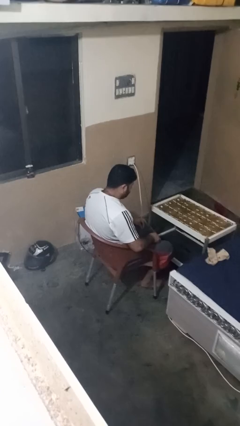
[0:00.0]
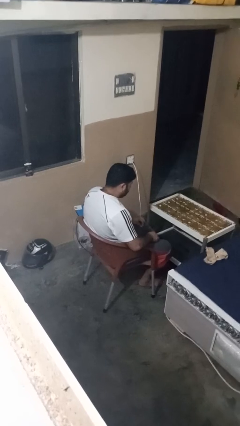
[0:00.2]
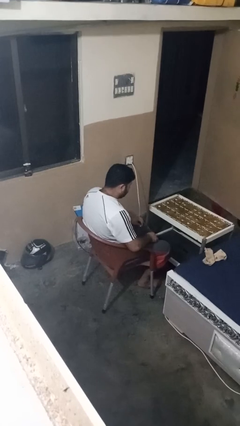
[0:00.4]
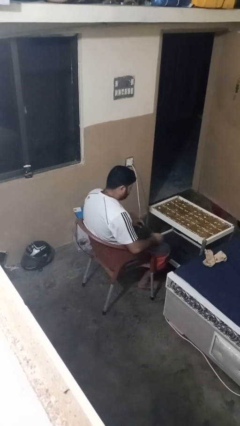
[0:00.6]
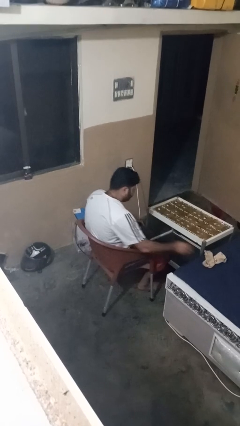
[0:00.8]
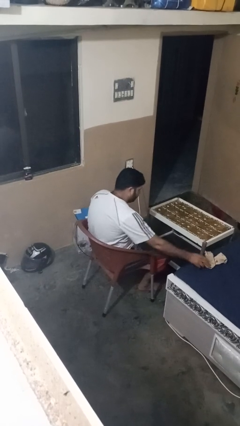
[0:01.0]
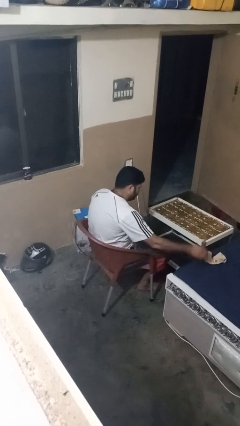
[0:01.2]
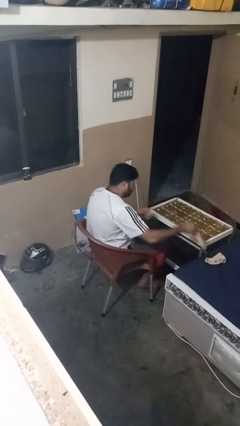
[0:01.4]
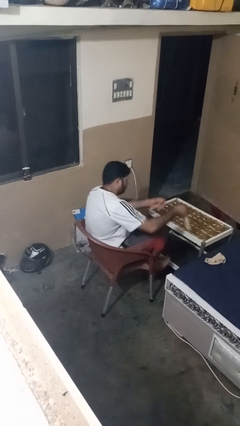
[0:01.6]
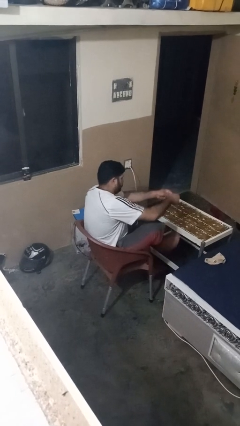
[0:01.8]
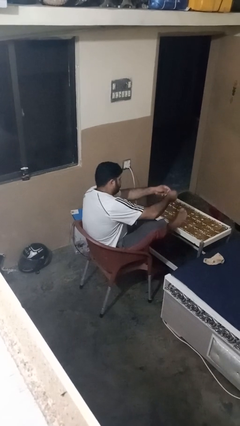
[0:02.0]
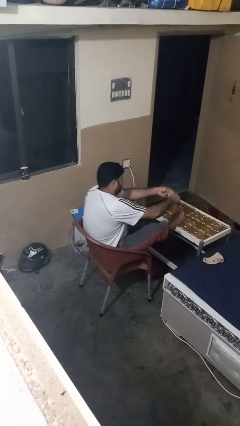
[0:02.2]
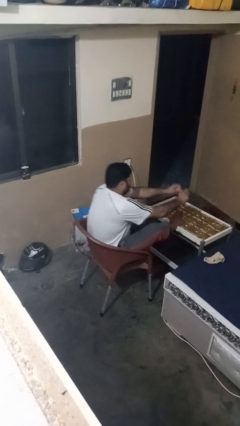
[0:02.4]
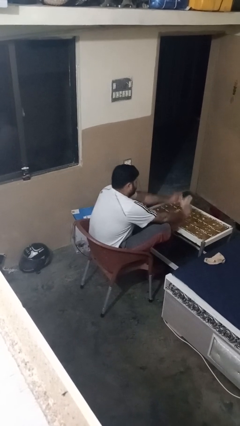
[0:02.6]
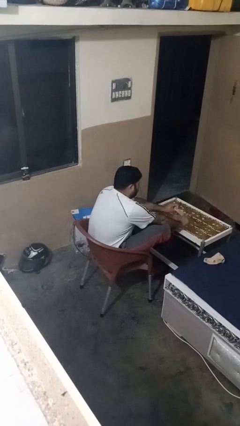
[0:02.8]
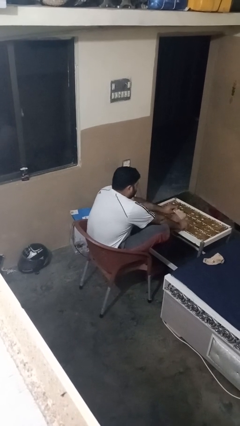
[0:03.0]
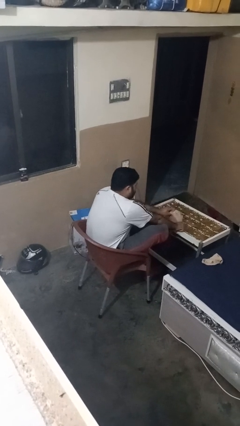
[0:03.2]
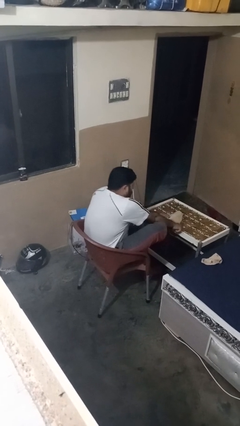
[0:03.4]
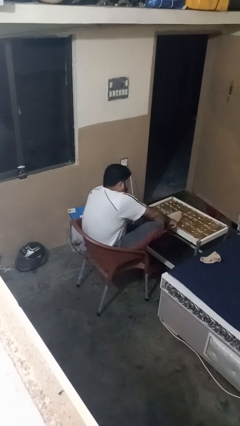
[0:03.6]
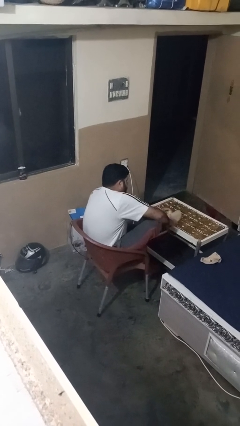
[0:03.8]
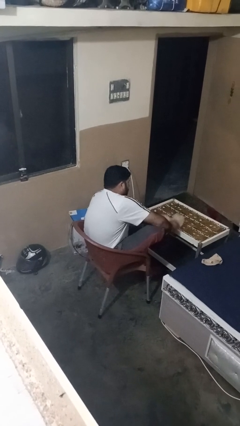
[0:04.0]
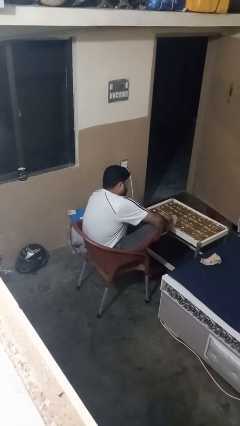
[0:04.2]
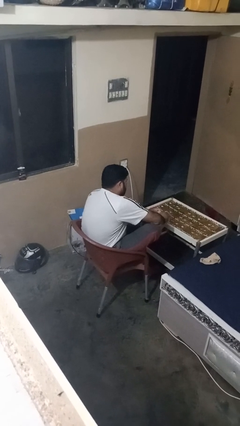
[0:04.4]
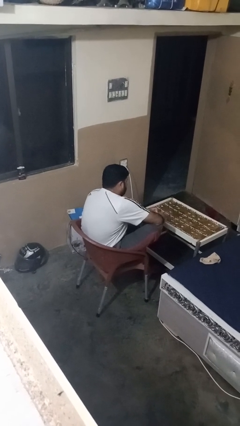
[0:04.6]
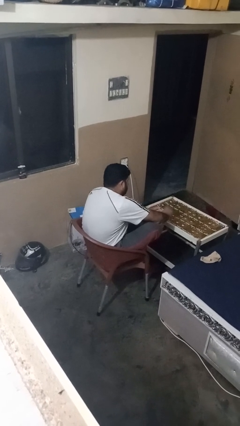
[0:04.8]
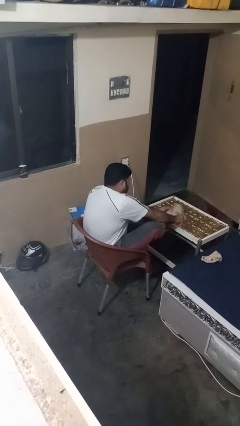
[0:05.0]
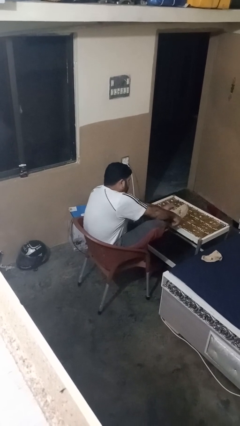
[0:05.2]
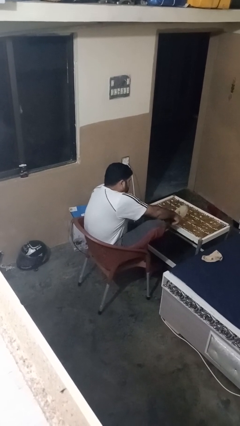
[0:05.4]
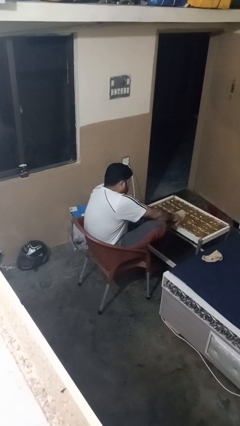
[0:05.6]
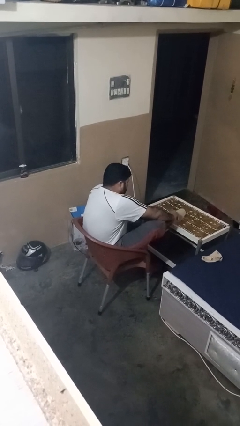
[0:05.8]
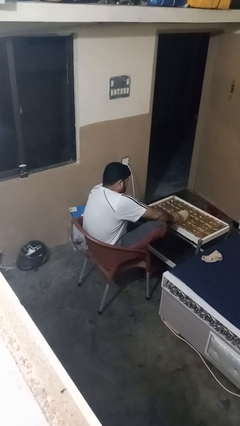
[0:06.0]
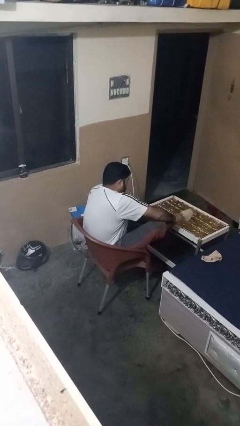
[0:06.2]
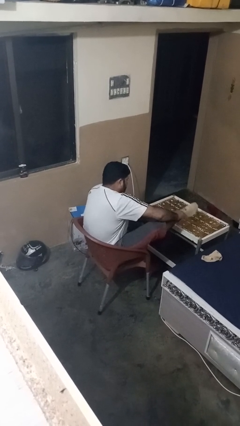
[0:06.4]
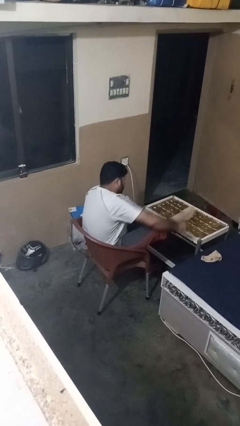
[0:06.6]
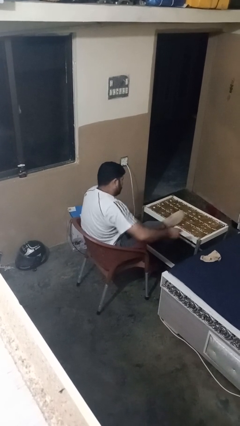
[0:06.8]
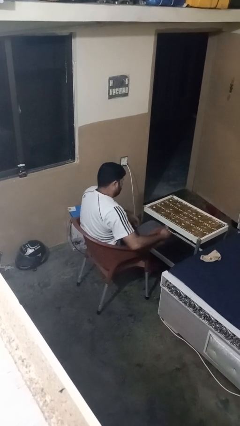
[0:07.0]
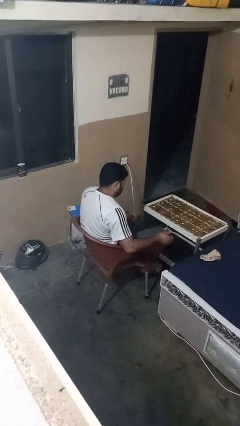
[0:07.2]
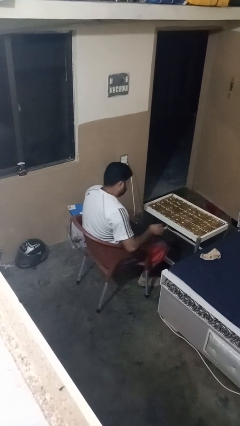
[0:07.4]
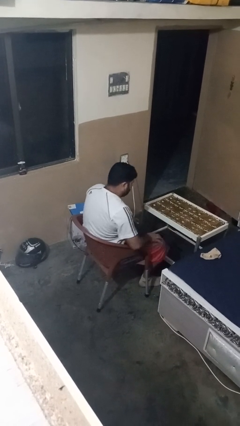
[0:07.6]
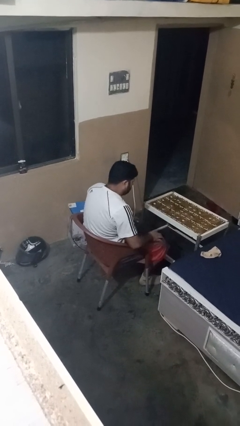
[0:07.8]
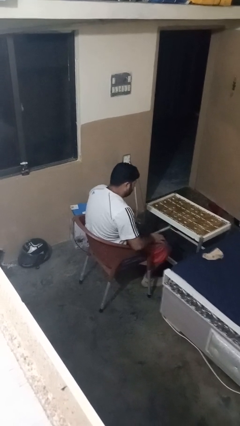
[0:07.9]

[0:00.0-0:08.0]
person puts on socks

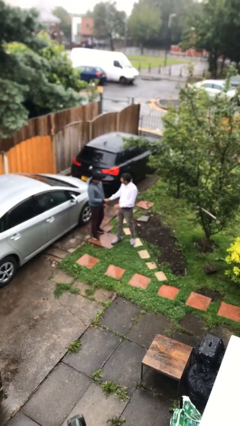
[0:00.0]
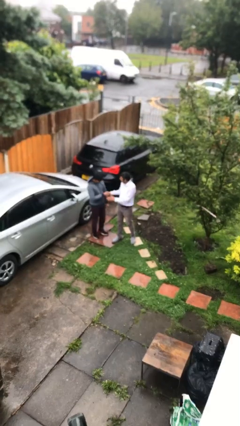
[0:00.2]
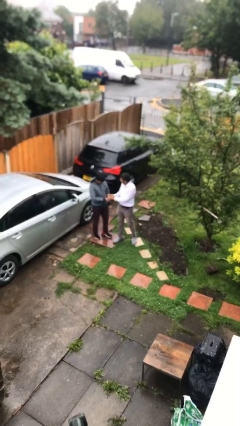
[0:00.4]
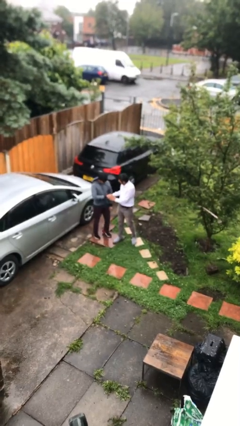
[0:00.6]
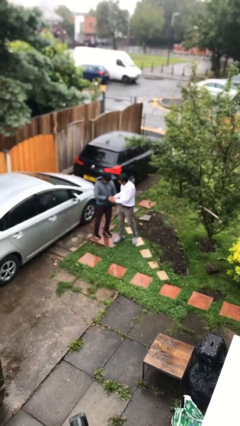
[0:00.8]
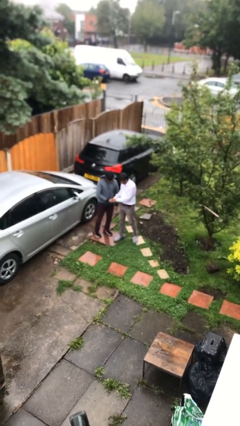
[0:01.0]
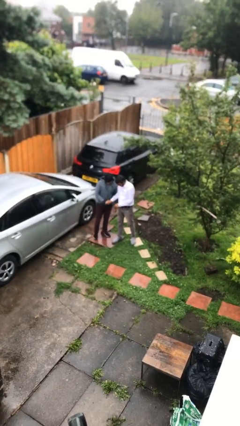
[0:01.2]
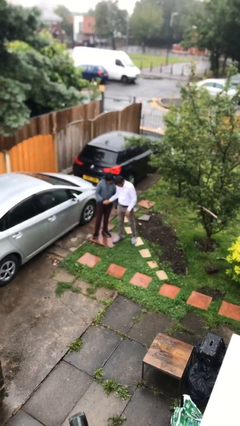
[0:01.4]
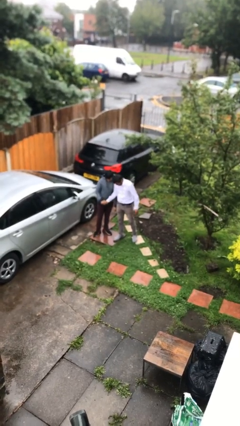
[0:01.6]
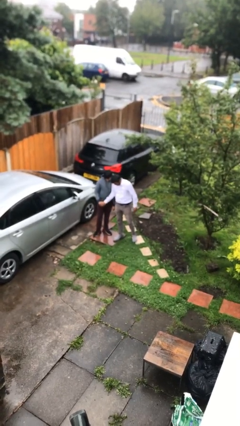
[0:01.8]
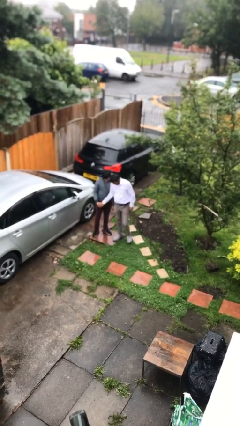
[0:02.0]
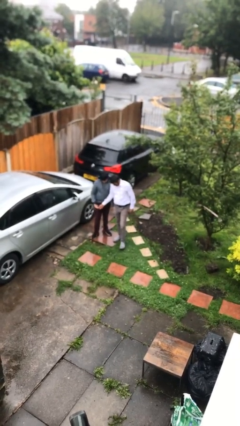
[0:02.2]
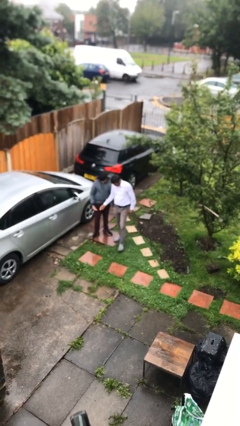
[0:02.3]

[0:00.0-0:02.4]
person shakes hand

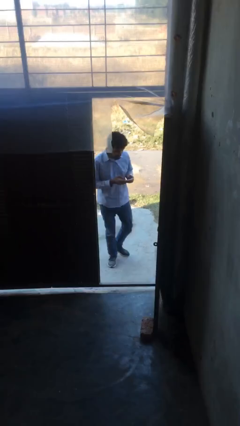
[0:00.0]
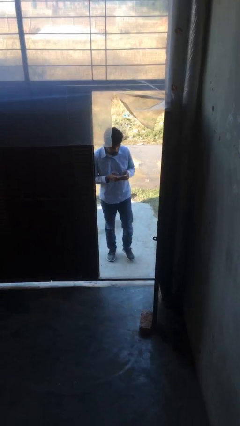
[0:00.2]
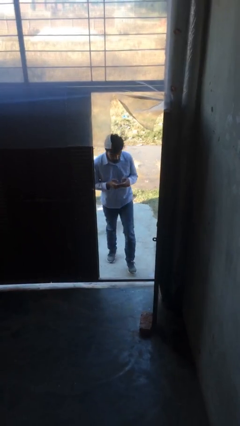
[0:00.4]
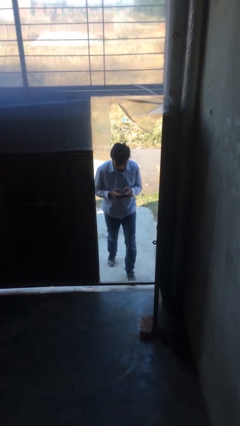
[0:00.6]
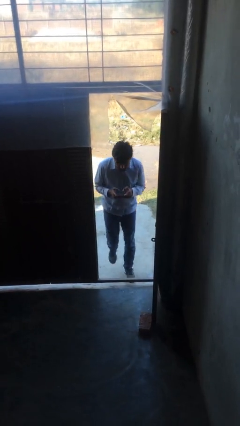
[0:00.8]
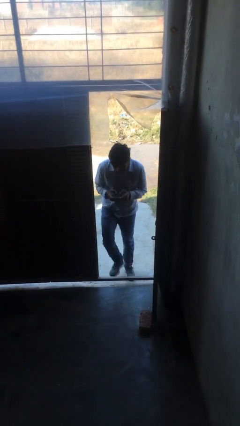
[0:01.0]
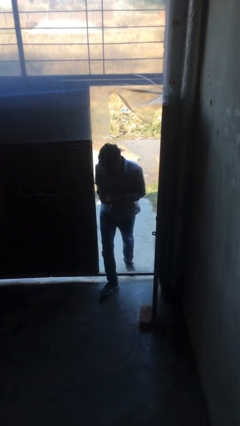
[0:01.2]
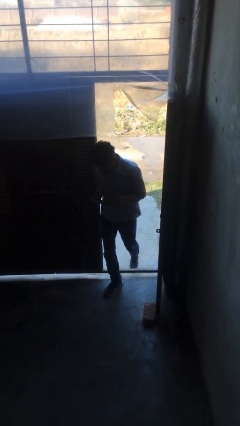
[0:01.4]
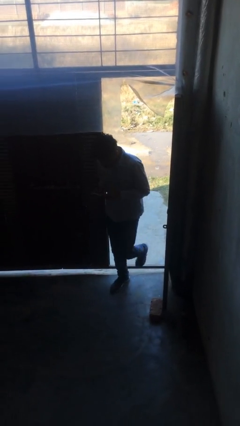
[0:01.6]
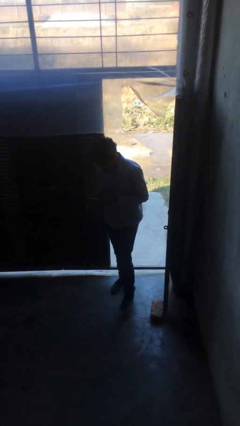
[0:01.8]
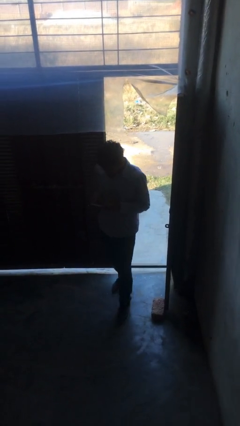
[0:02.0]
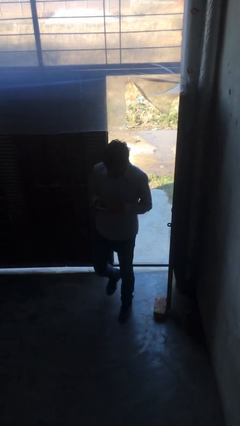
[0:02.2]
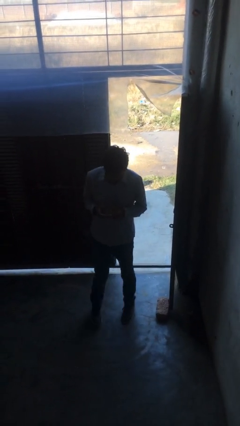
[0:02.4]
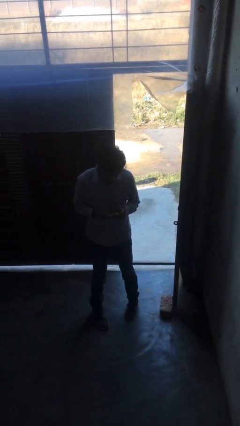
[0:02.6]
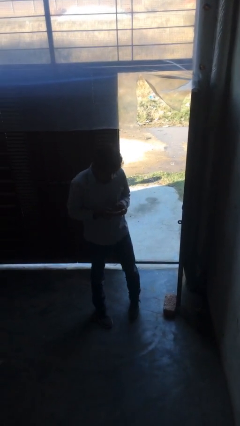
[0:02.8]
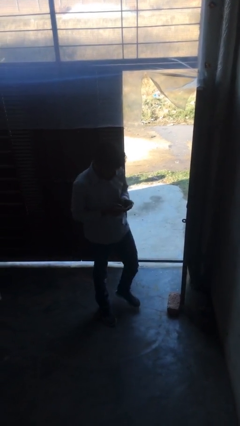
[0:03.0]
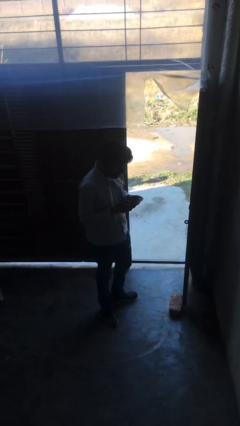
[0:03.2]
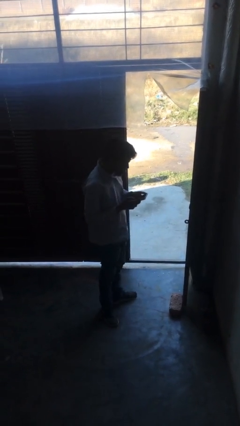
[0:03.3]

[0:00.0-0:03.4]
person enters scene through structure

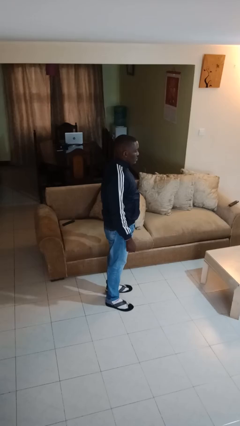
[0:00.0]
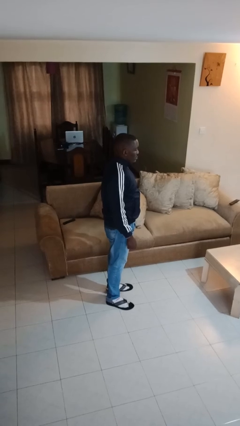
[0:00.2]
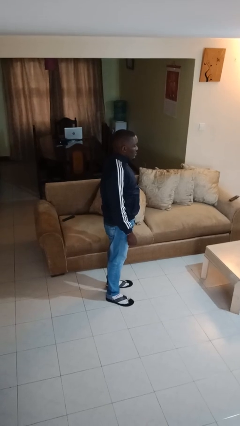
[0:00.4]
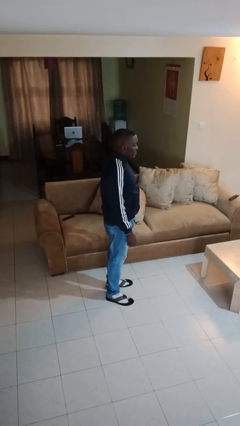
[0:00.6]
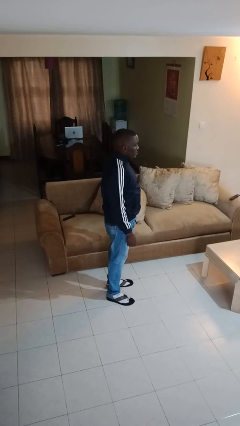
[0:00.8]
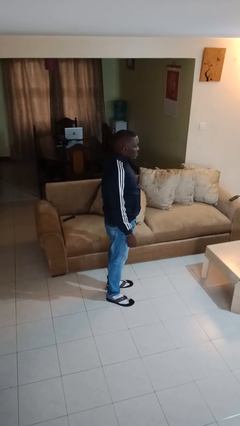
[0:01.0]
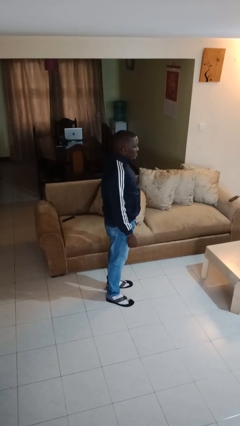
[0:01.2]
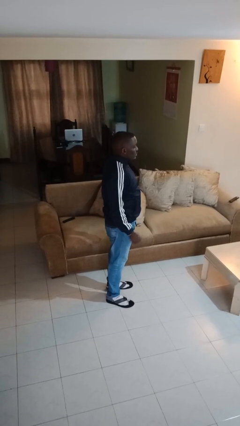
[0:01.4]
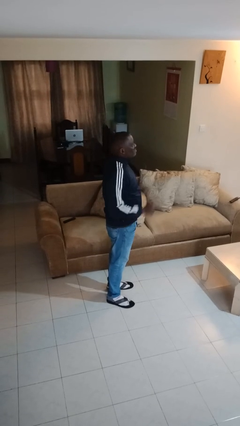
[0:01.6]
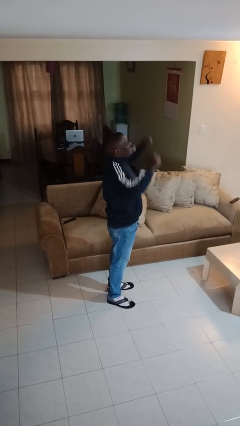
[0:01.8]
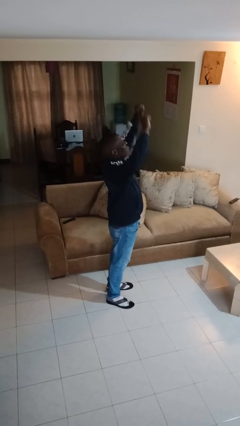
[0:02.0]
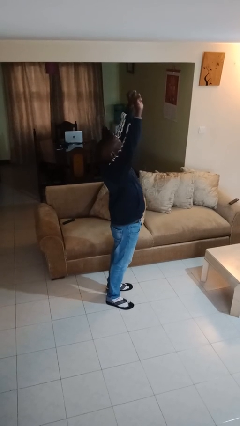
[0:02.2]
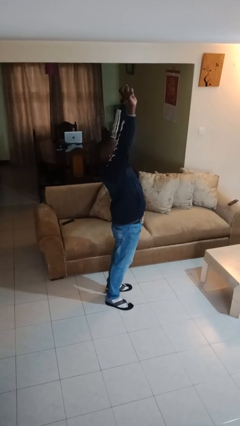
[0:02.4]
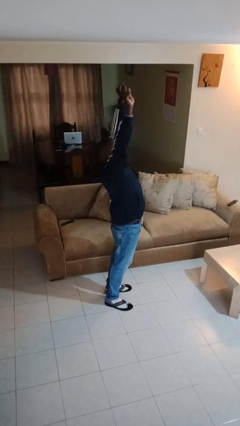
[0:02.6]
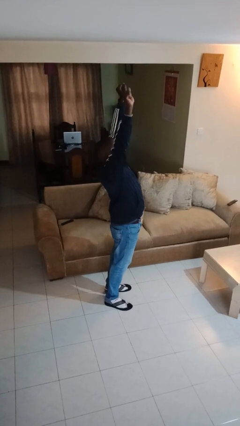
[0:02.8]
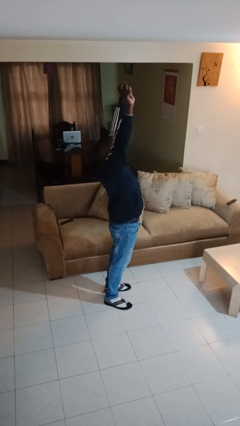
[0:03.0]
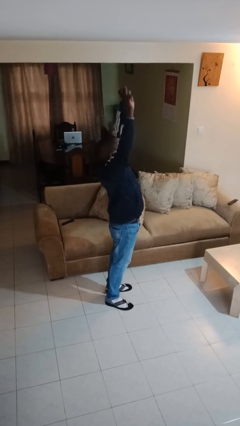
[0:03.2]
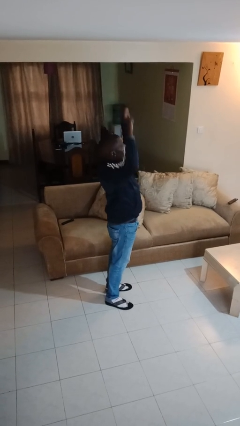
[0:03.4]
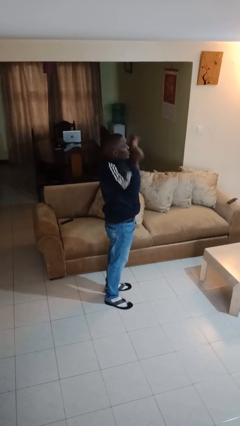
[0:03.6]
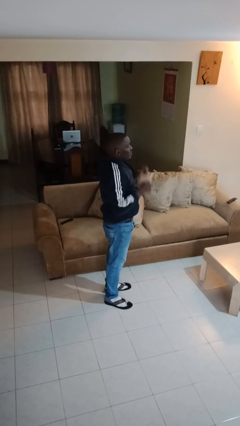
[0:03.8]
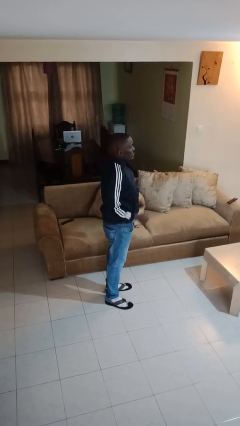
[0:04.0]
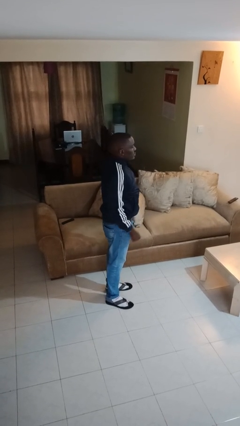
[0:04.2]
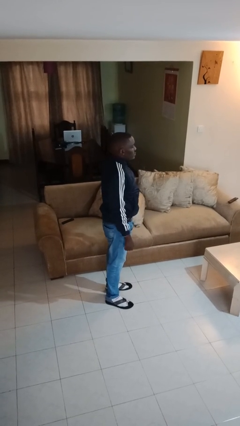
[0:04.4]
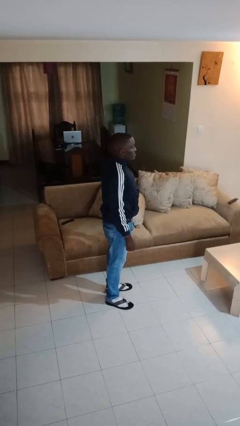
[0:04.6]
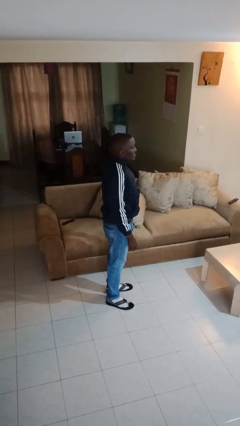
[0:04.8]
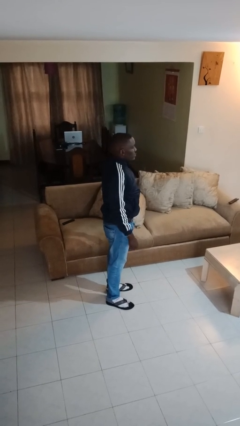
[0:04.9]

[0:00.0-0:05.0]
person stretches arms over head
